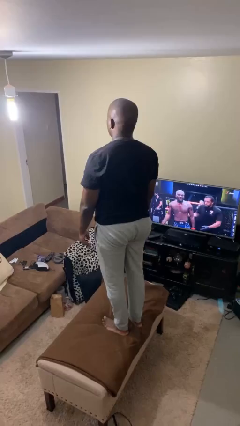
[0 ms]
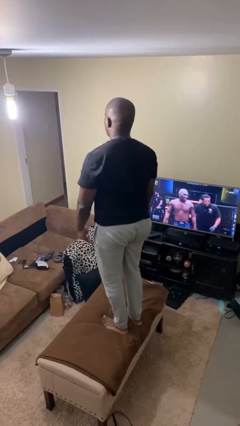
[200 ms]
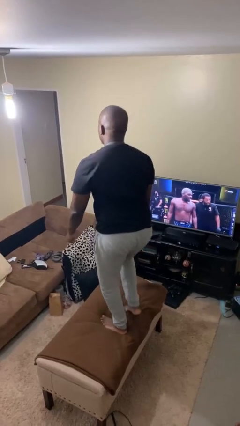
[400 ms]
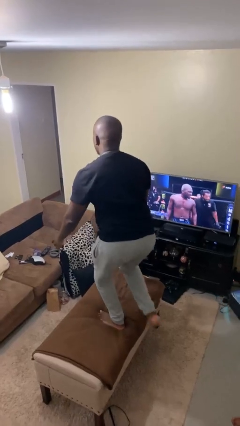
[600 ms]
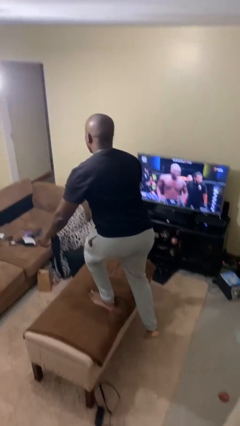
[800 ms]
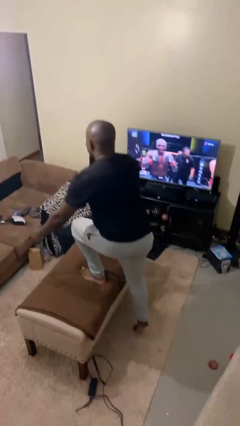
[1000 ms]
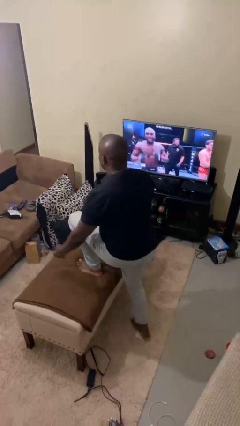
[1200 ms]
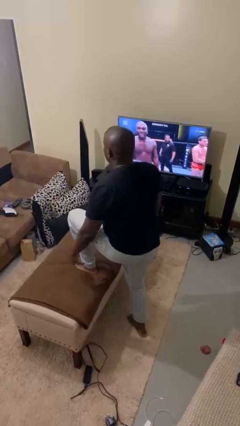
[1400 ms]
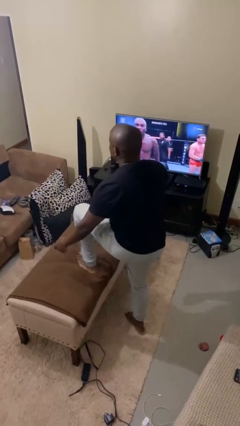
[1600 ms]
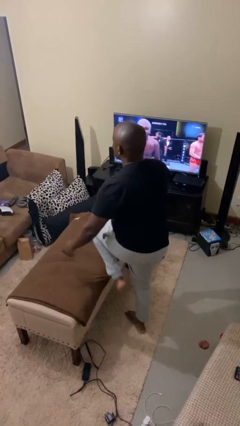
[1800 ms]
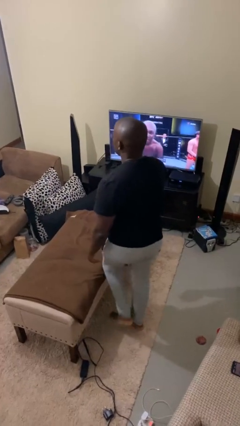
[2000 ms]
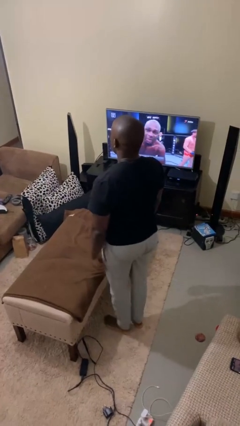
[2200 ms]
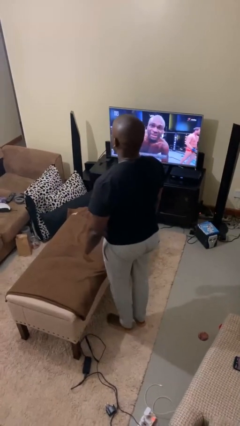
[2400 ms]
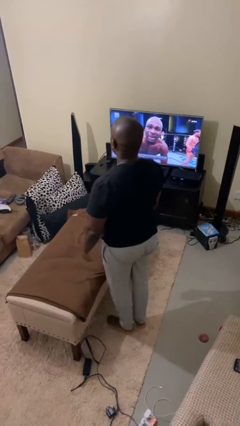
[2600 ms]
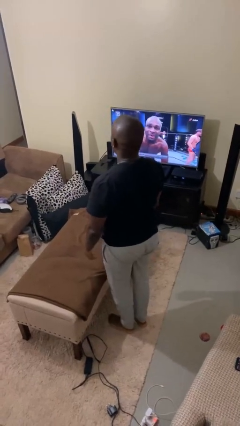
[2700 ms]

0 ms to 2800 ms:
person climbs off table

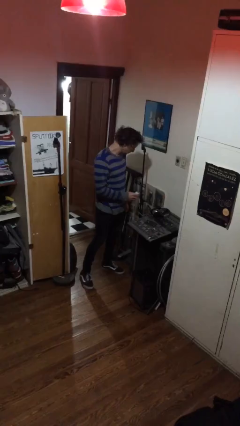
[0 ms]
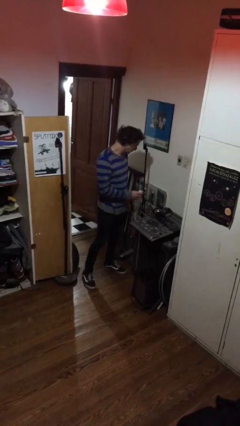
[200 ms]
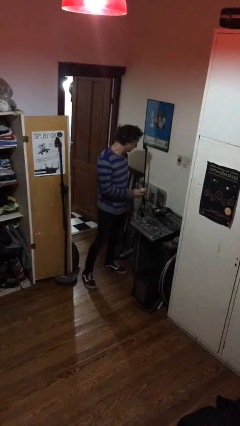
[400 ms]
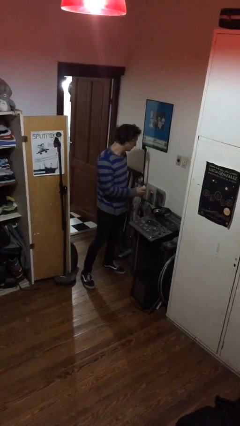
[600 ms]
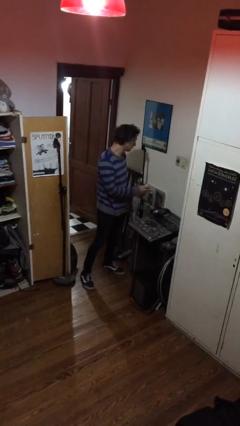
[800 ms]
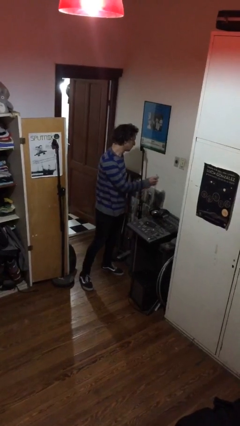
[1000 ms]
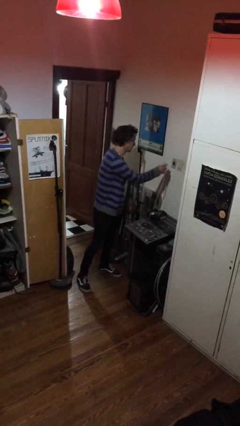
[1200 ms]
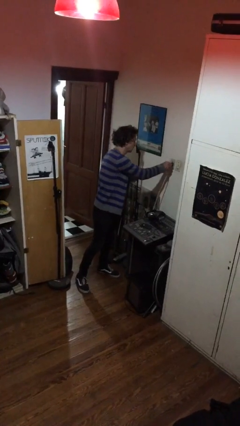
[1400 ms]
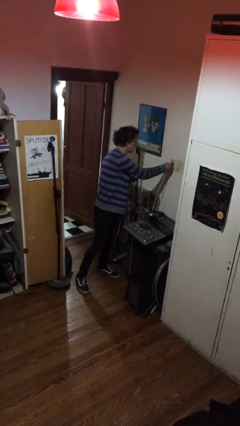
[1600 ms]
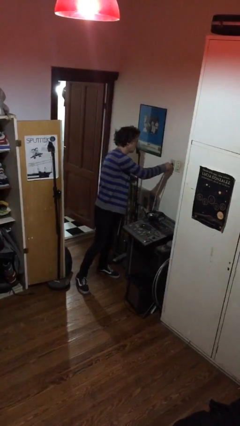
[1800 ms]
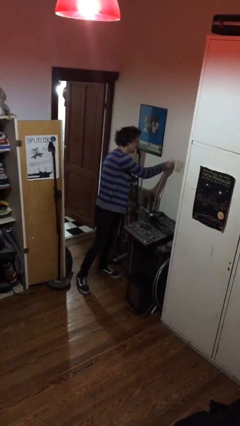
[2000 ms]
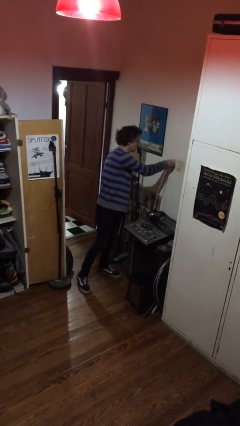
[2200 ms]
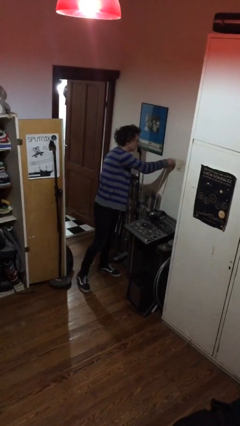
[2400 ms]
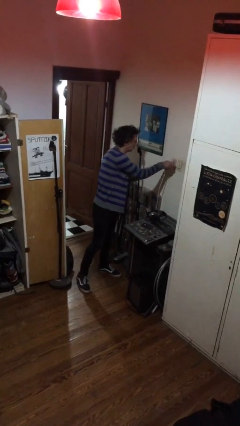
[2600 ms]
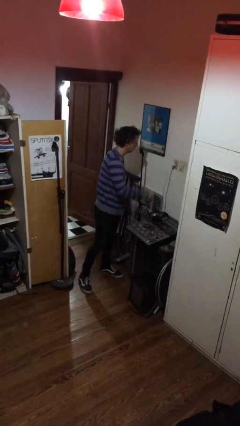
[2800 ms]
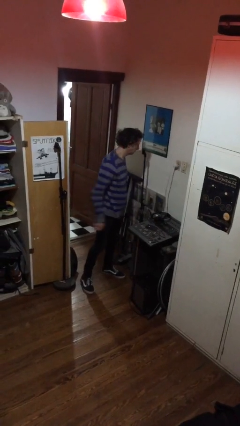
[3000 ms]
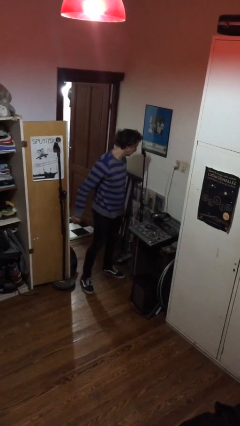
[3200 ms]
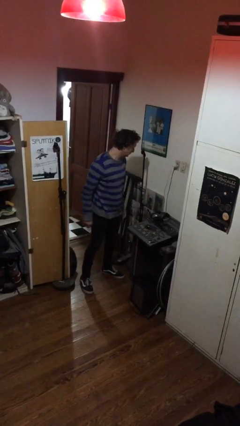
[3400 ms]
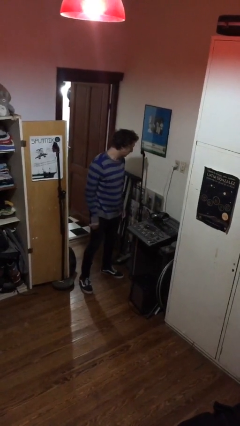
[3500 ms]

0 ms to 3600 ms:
person plugs into electrical socket

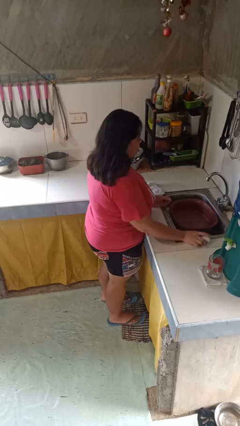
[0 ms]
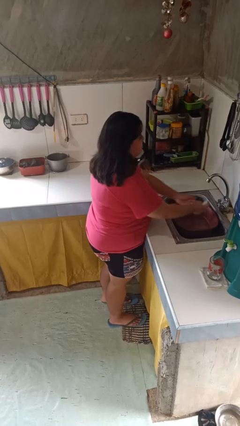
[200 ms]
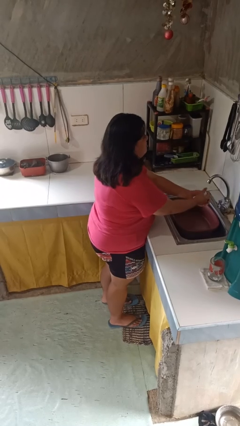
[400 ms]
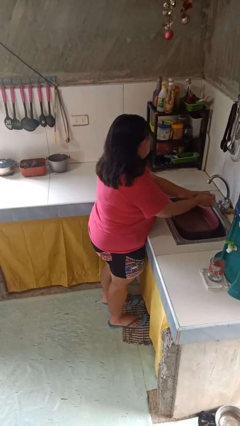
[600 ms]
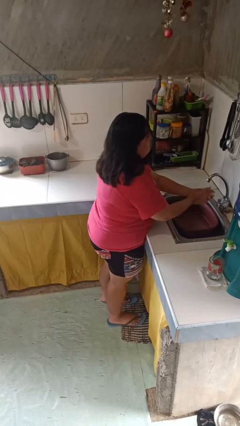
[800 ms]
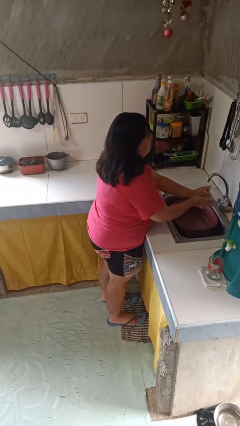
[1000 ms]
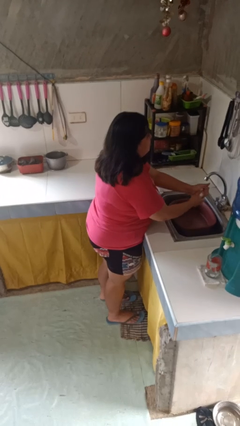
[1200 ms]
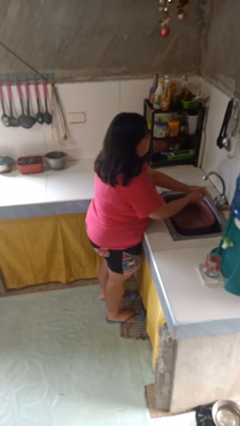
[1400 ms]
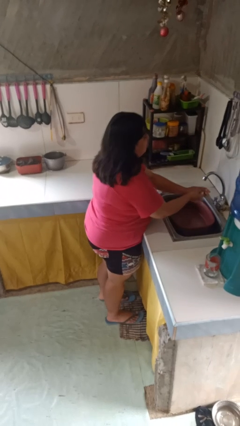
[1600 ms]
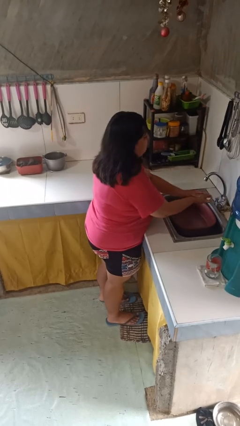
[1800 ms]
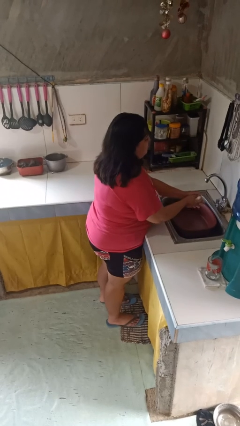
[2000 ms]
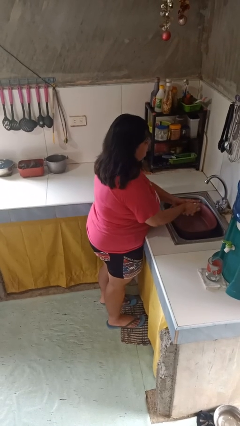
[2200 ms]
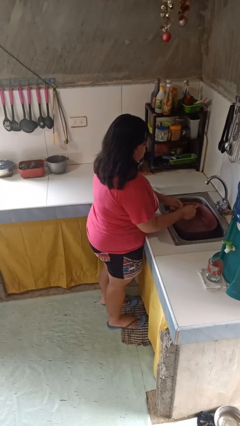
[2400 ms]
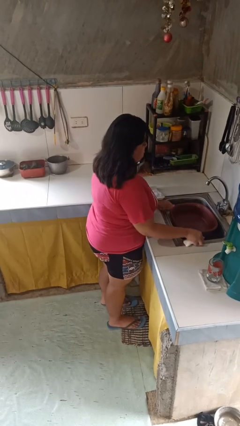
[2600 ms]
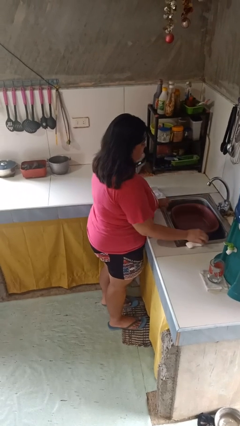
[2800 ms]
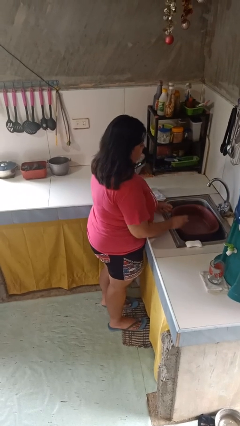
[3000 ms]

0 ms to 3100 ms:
person washes hands

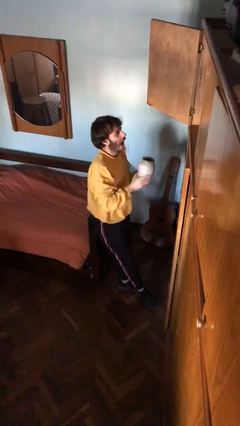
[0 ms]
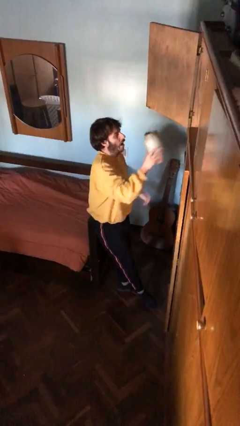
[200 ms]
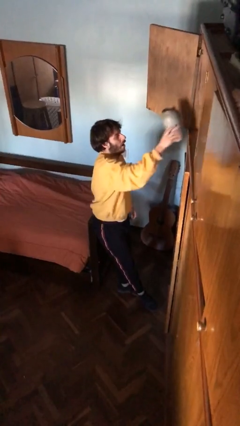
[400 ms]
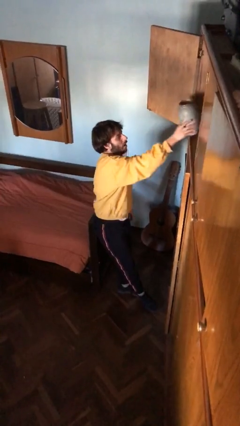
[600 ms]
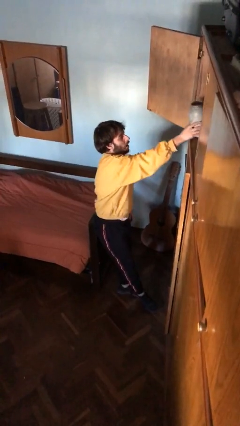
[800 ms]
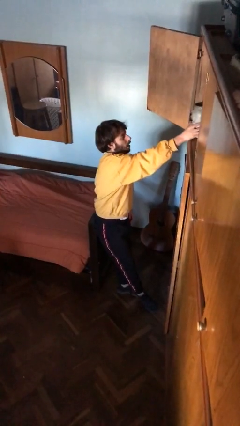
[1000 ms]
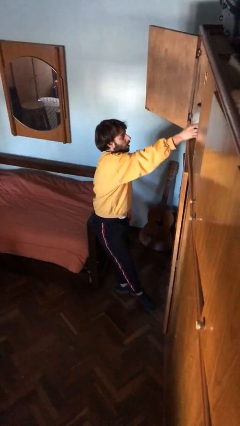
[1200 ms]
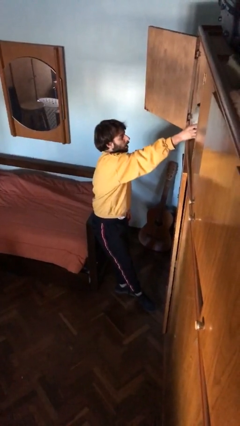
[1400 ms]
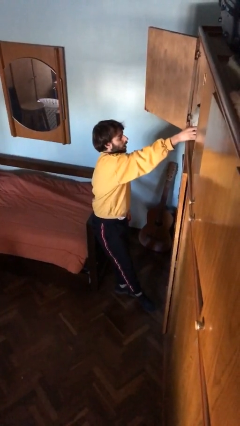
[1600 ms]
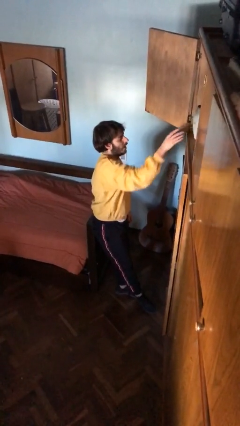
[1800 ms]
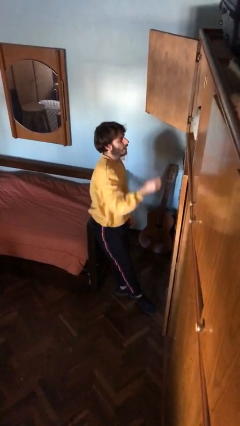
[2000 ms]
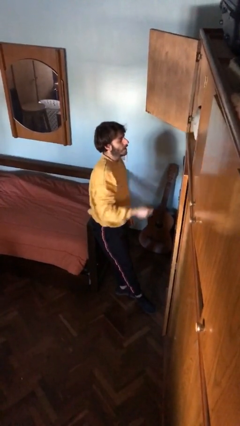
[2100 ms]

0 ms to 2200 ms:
person puts down object into cabinet

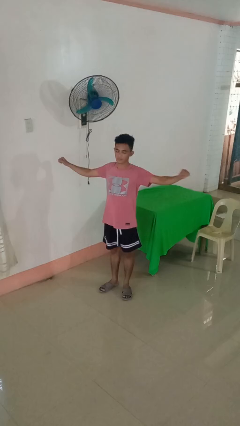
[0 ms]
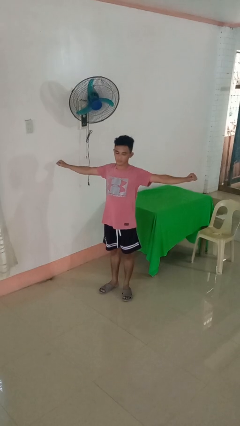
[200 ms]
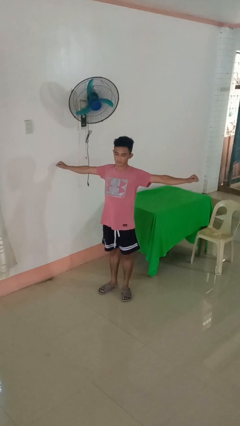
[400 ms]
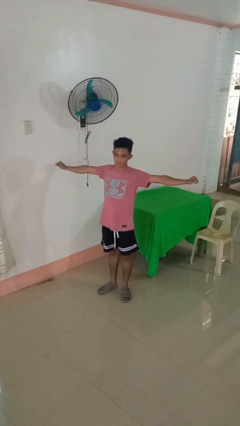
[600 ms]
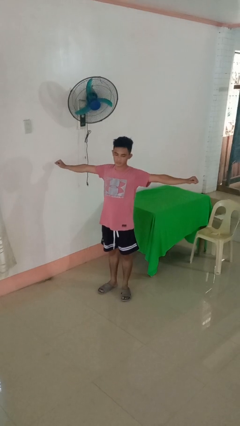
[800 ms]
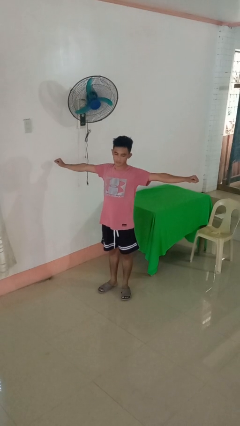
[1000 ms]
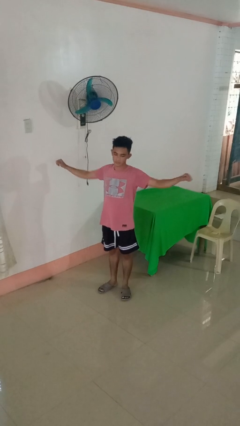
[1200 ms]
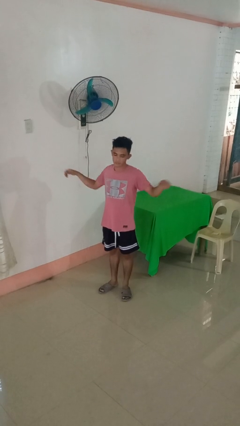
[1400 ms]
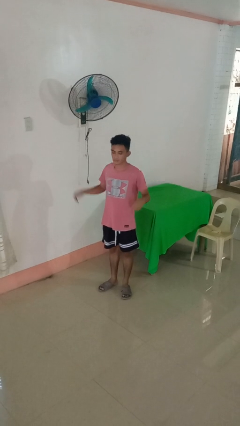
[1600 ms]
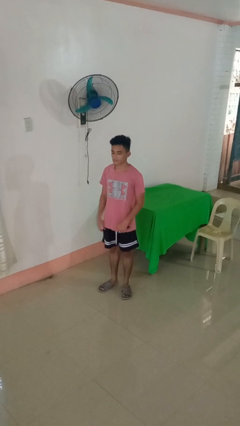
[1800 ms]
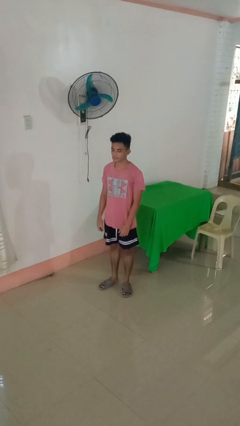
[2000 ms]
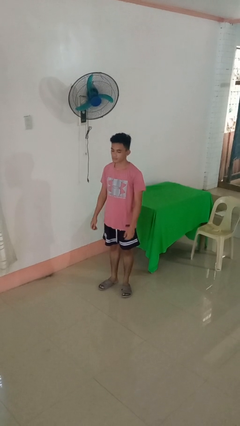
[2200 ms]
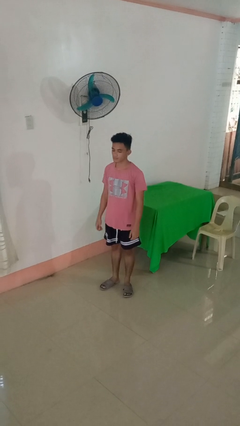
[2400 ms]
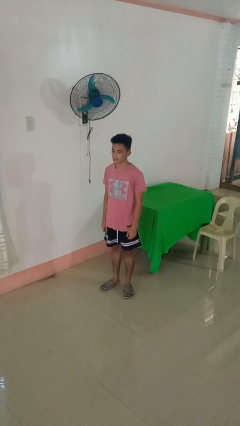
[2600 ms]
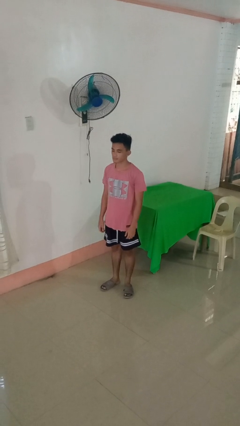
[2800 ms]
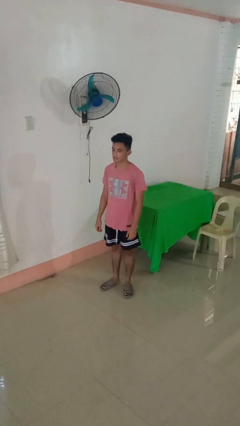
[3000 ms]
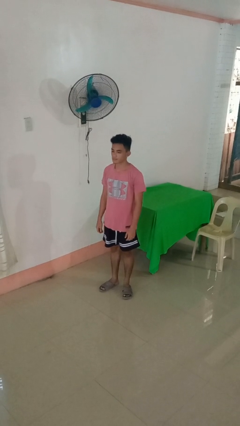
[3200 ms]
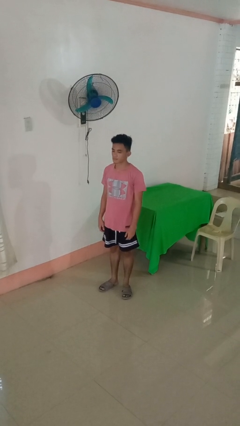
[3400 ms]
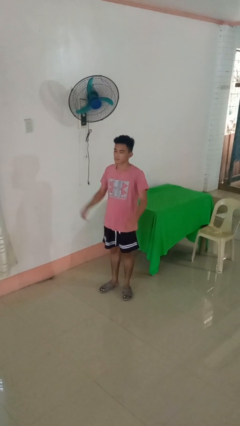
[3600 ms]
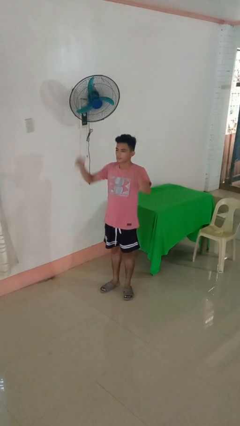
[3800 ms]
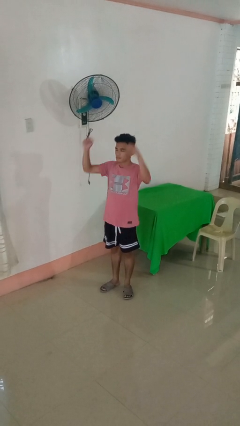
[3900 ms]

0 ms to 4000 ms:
person stretches arms to side

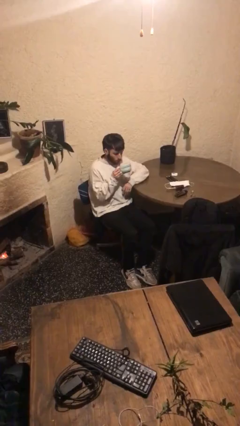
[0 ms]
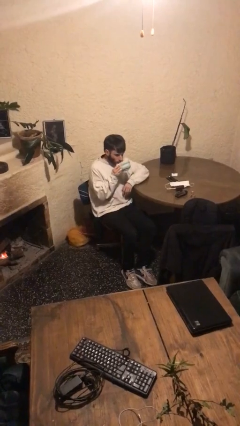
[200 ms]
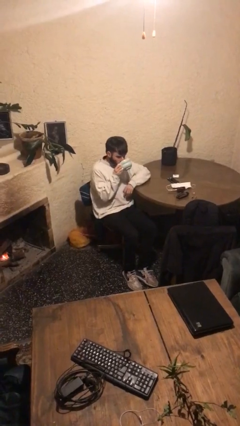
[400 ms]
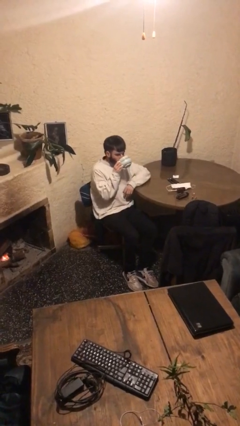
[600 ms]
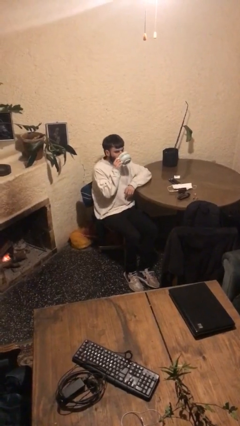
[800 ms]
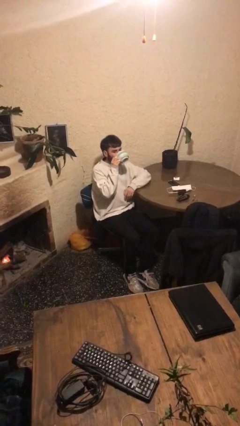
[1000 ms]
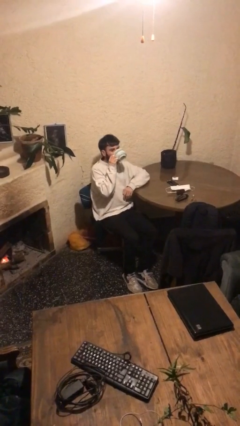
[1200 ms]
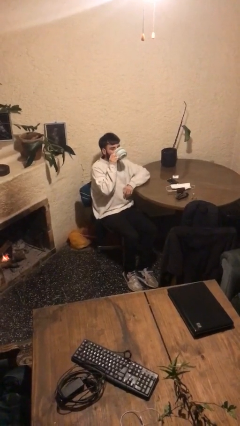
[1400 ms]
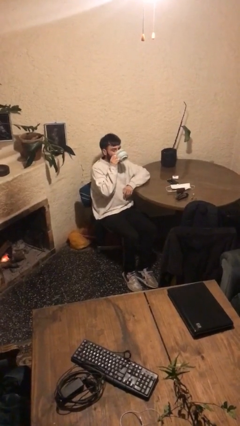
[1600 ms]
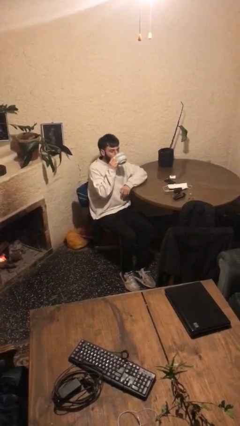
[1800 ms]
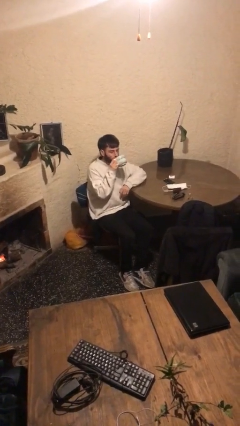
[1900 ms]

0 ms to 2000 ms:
person drinks from mug
